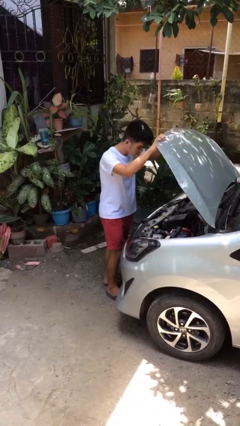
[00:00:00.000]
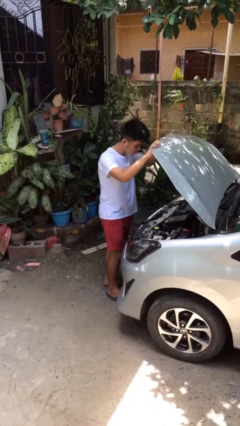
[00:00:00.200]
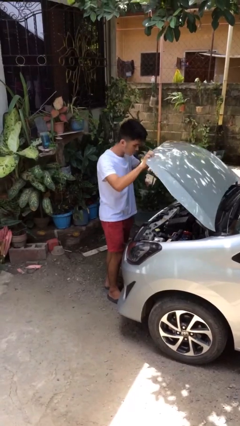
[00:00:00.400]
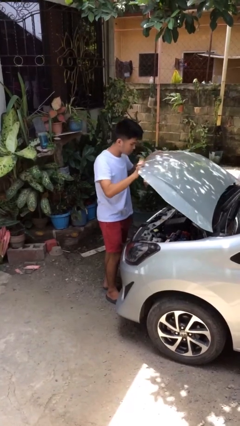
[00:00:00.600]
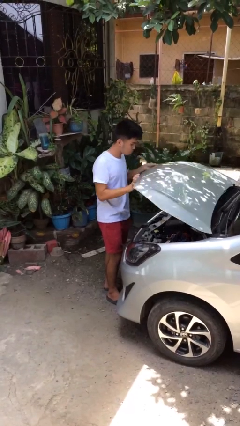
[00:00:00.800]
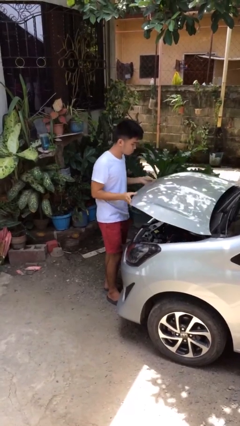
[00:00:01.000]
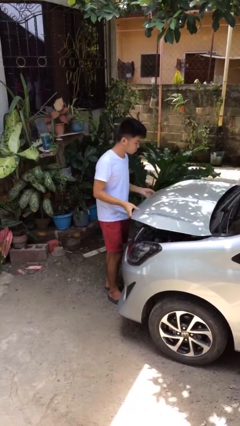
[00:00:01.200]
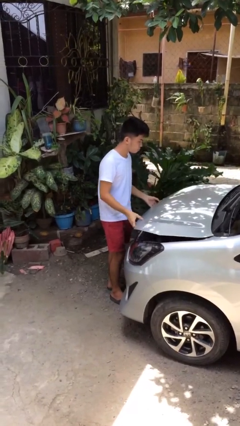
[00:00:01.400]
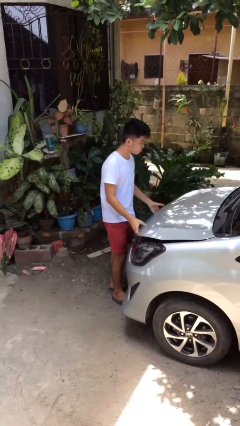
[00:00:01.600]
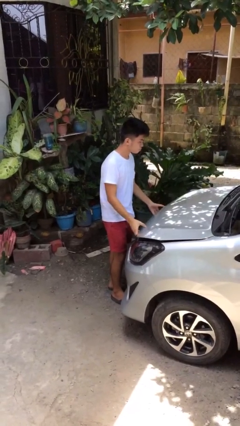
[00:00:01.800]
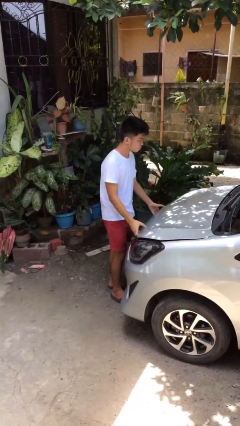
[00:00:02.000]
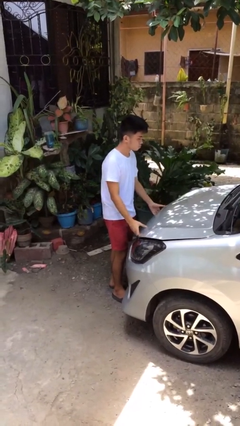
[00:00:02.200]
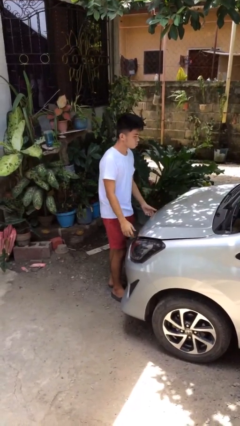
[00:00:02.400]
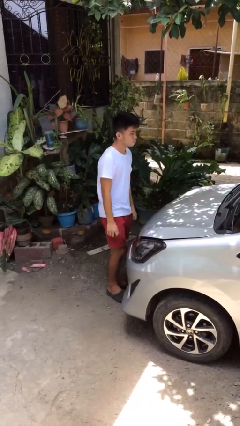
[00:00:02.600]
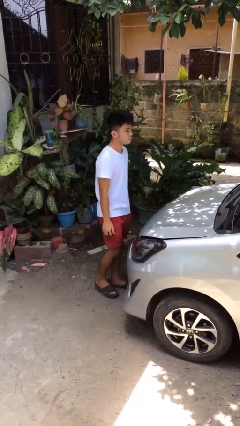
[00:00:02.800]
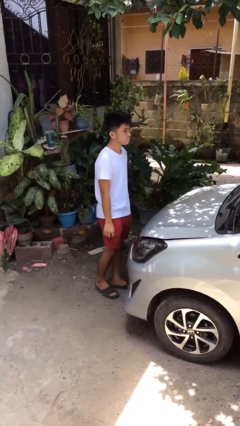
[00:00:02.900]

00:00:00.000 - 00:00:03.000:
person closes car hood

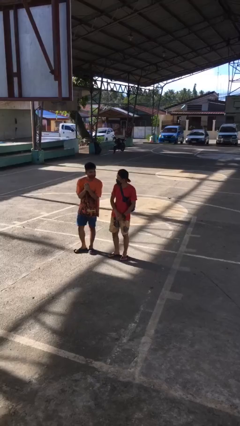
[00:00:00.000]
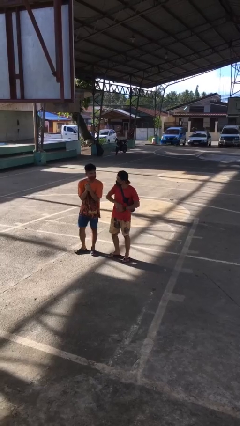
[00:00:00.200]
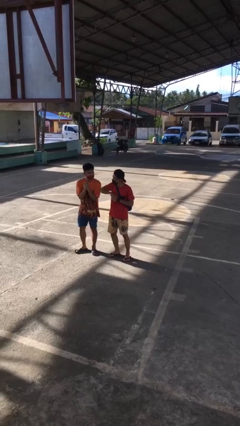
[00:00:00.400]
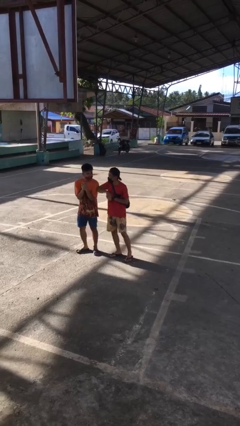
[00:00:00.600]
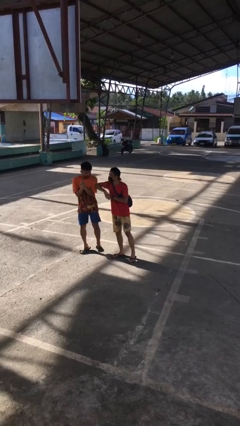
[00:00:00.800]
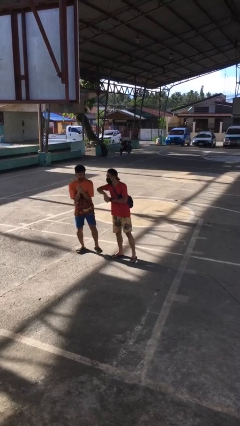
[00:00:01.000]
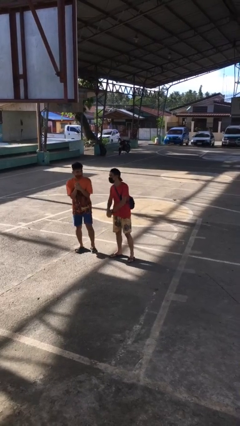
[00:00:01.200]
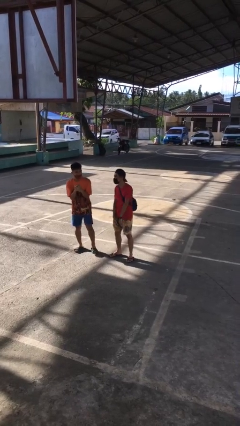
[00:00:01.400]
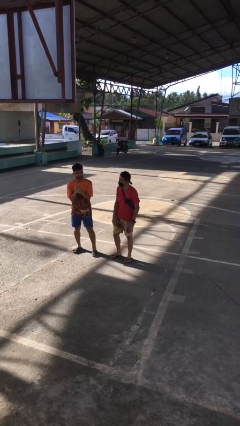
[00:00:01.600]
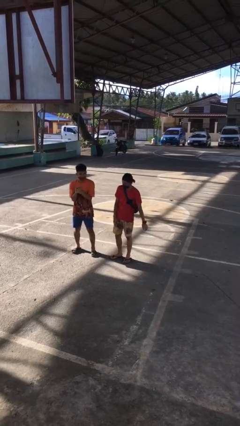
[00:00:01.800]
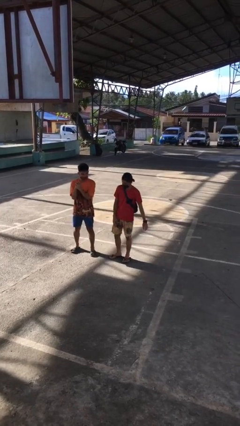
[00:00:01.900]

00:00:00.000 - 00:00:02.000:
person nudges person with elbow

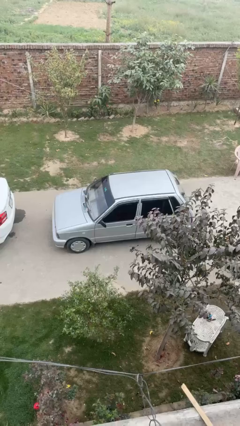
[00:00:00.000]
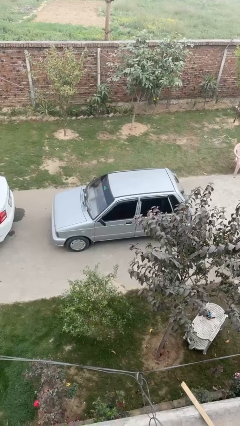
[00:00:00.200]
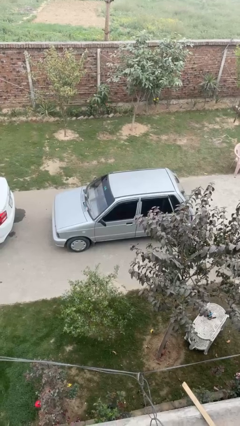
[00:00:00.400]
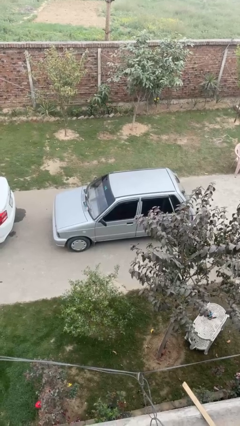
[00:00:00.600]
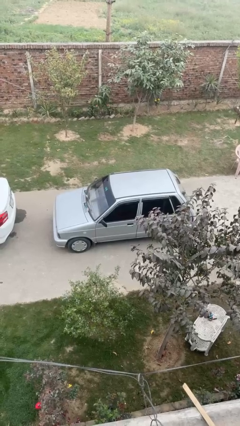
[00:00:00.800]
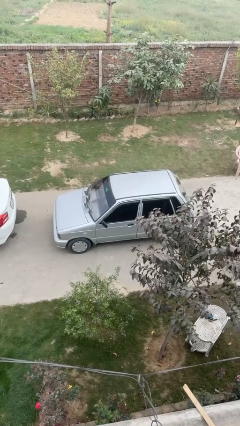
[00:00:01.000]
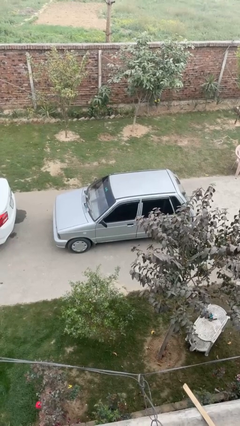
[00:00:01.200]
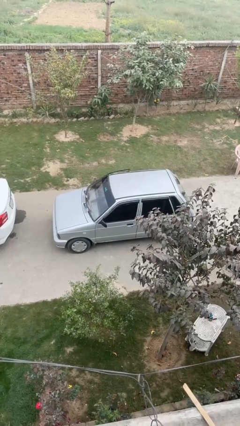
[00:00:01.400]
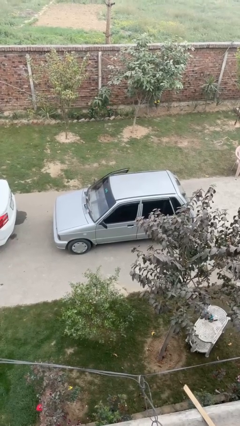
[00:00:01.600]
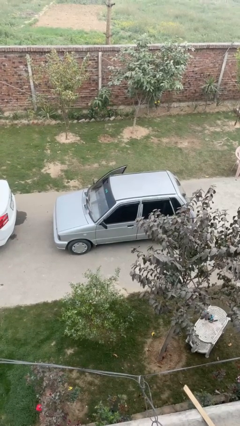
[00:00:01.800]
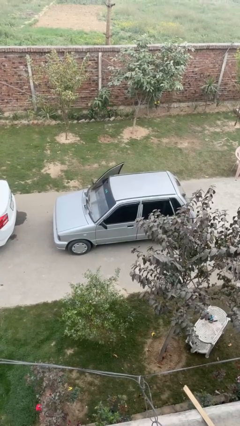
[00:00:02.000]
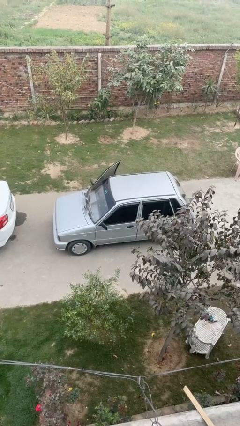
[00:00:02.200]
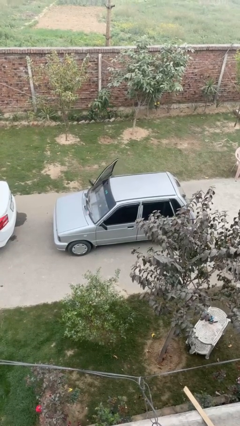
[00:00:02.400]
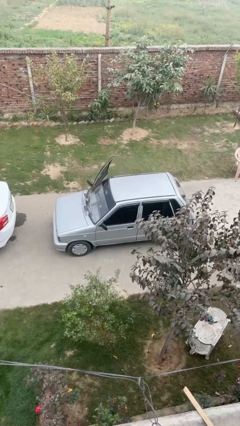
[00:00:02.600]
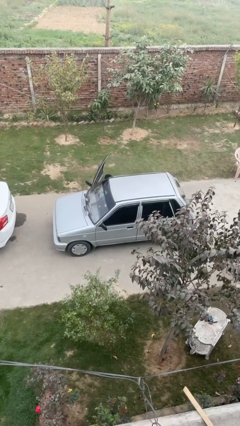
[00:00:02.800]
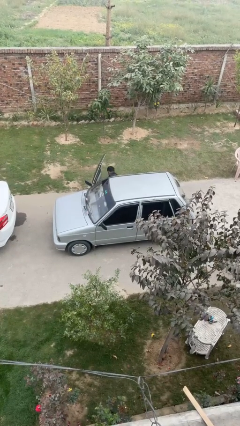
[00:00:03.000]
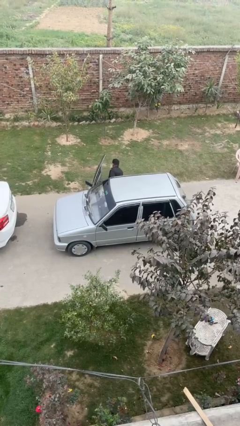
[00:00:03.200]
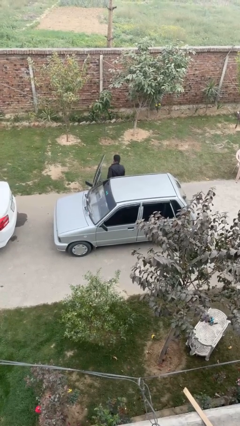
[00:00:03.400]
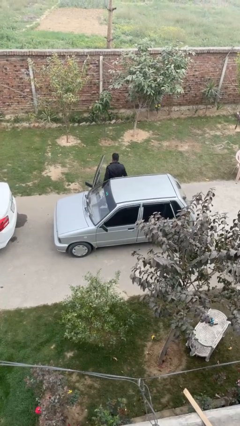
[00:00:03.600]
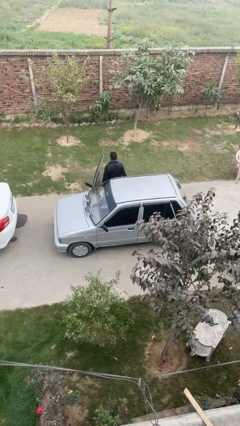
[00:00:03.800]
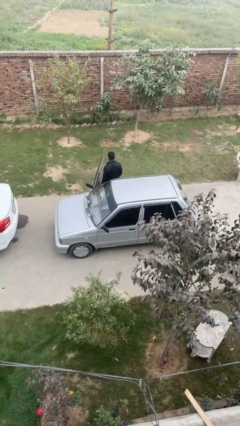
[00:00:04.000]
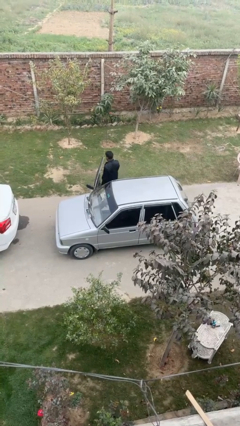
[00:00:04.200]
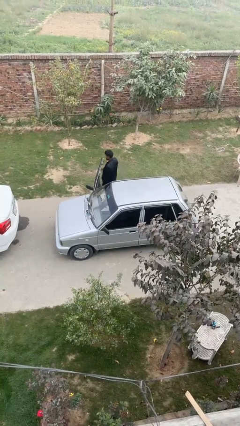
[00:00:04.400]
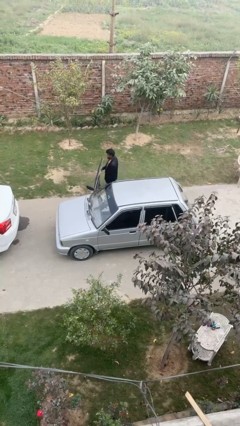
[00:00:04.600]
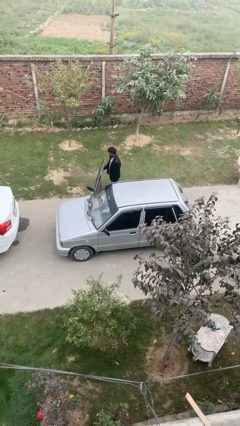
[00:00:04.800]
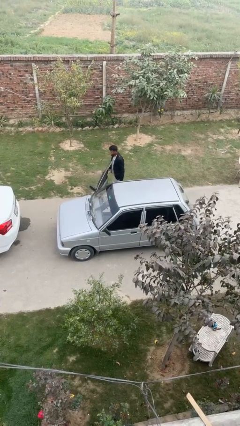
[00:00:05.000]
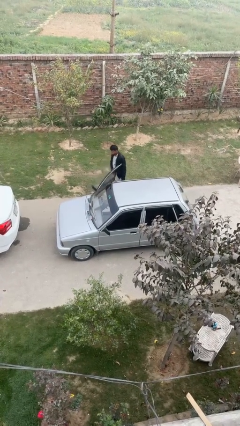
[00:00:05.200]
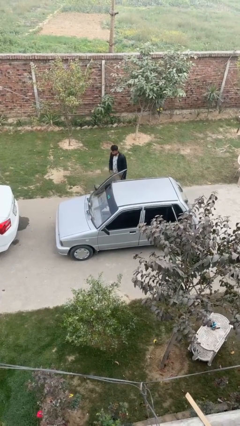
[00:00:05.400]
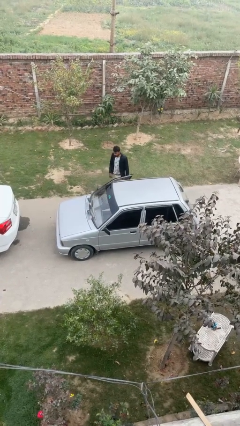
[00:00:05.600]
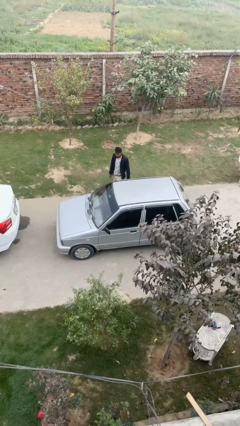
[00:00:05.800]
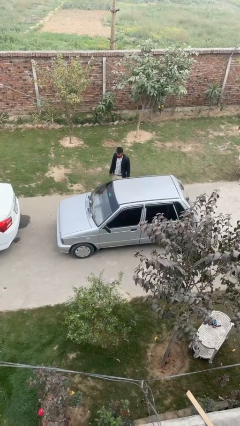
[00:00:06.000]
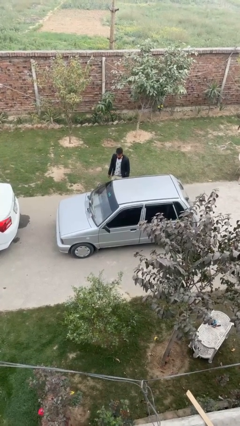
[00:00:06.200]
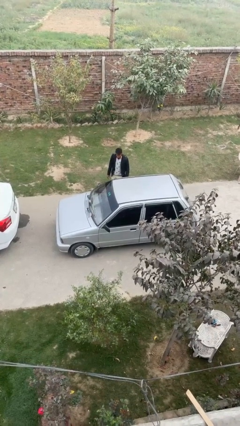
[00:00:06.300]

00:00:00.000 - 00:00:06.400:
car drops off person

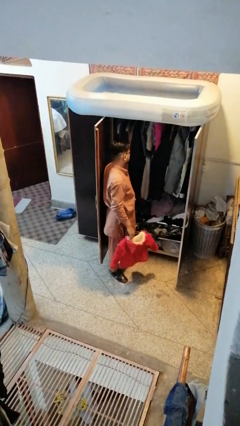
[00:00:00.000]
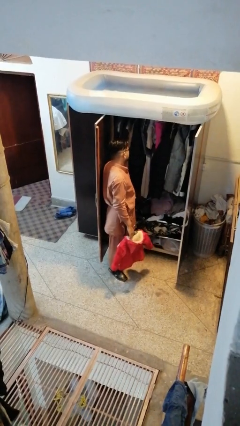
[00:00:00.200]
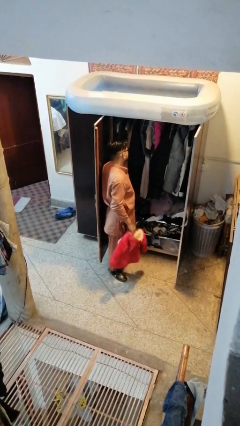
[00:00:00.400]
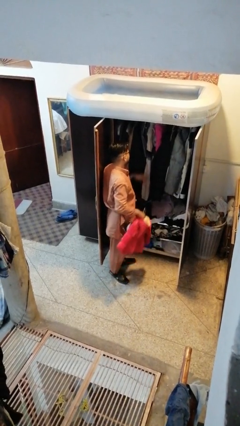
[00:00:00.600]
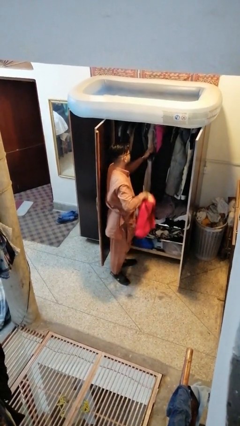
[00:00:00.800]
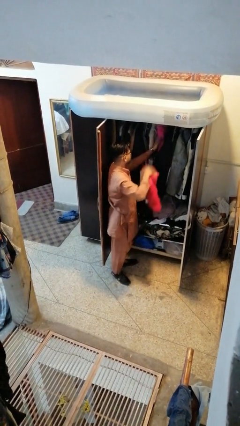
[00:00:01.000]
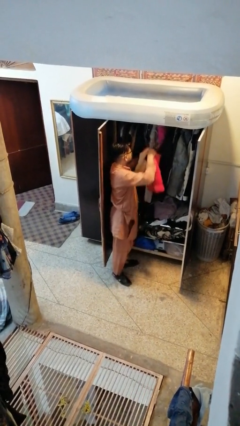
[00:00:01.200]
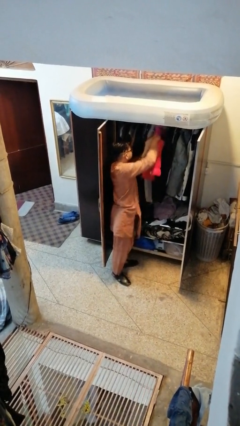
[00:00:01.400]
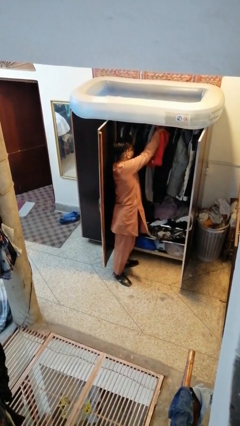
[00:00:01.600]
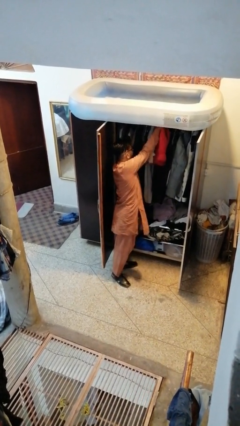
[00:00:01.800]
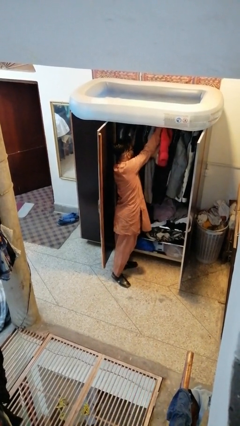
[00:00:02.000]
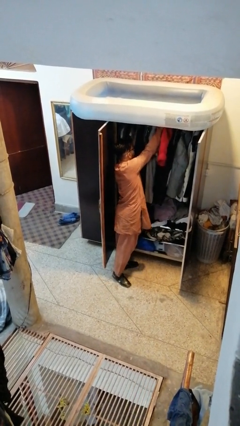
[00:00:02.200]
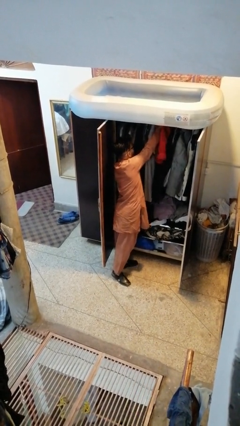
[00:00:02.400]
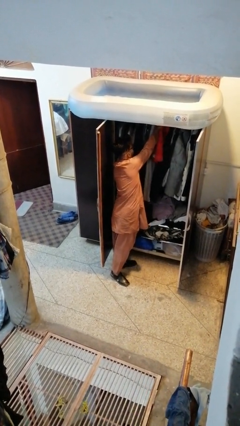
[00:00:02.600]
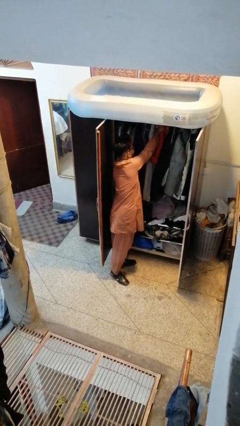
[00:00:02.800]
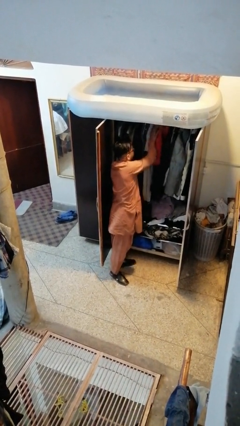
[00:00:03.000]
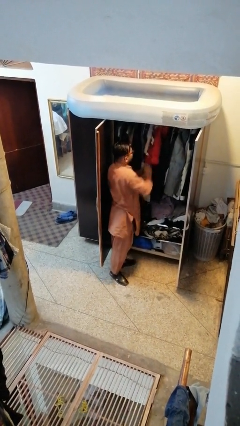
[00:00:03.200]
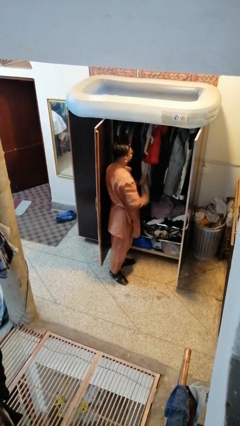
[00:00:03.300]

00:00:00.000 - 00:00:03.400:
person puts clothes into closet

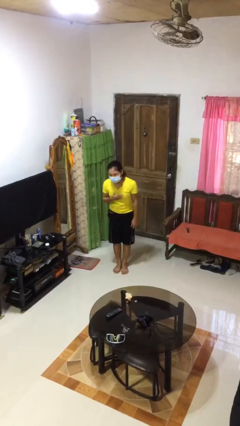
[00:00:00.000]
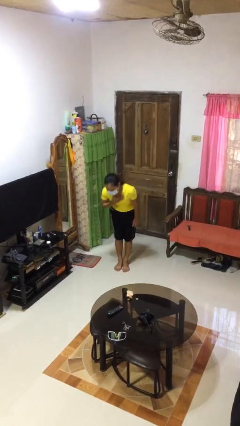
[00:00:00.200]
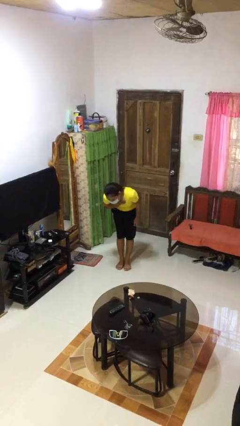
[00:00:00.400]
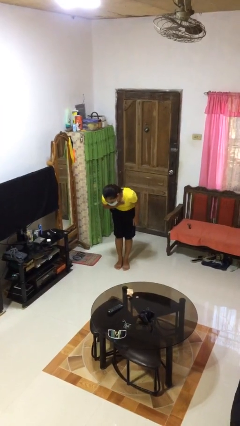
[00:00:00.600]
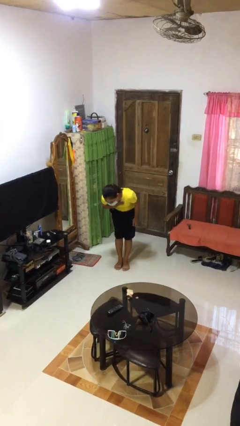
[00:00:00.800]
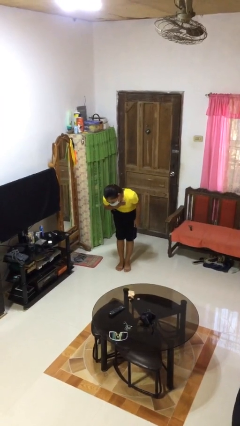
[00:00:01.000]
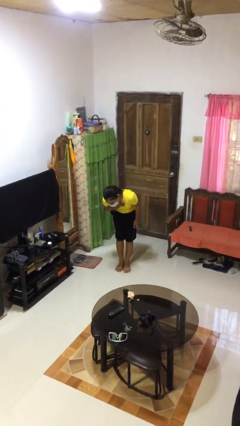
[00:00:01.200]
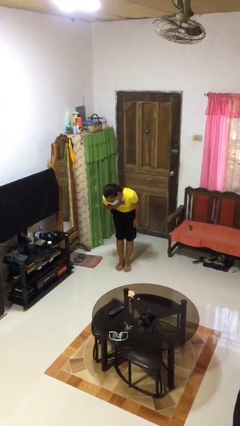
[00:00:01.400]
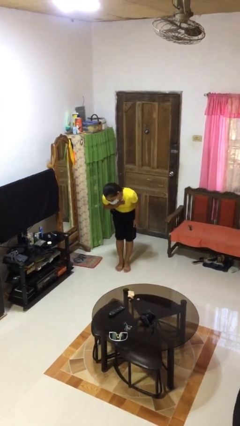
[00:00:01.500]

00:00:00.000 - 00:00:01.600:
person bows

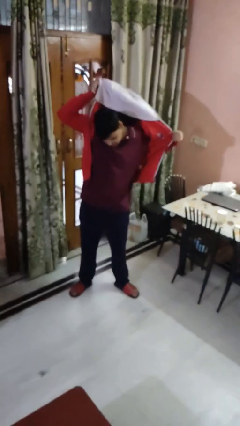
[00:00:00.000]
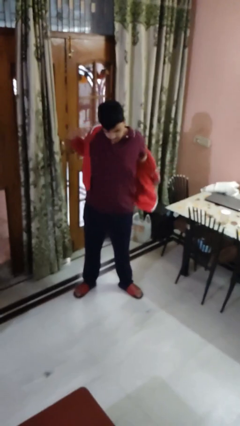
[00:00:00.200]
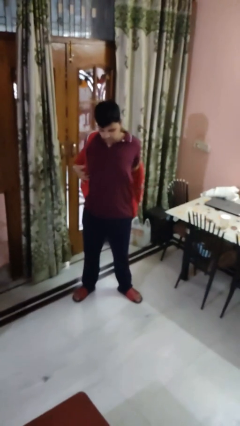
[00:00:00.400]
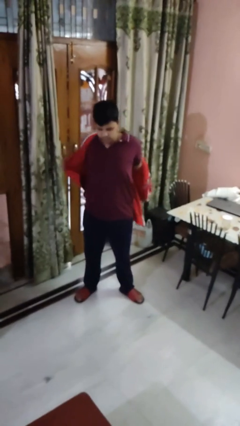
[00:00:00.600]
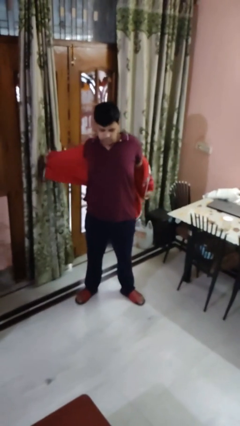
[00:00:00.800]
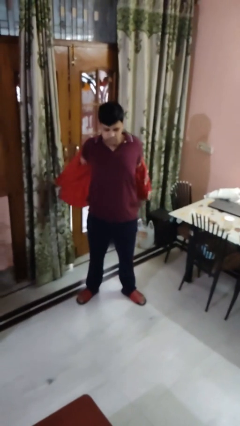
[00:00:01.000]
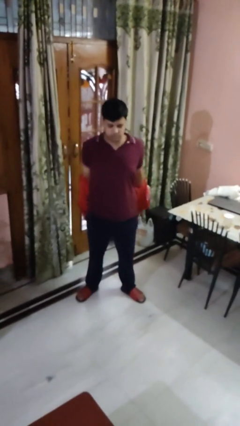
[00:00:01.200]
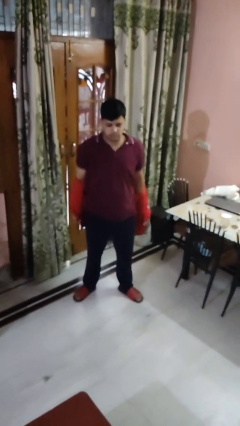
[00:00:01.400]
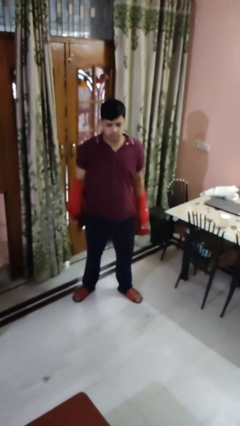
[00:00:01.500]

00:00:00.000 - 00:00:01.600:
person takes off hoodie
